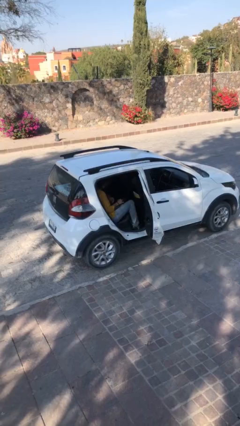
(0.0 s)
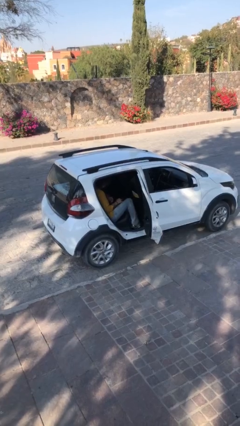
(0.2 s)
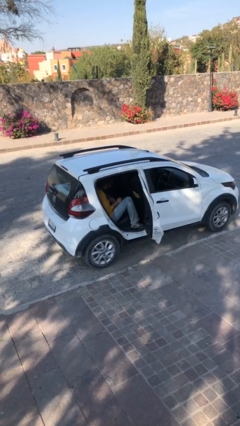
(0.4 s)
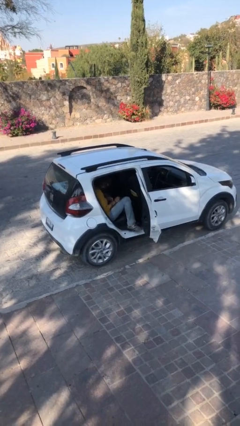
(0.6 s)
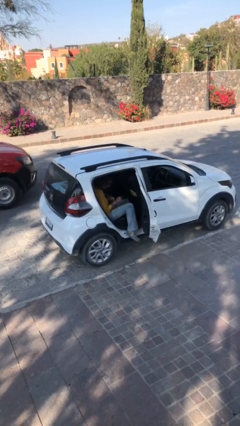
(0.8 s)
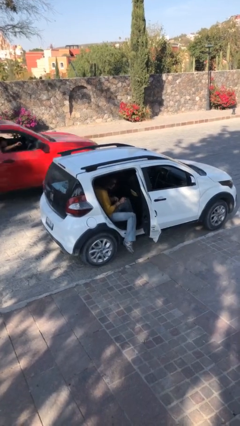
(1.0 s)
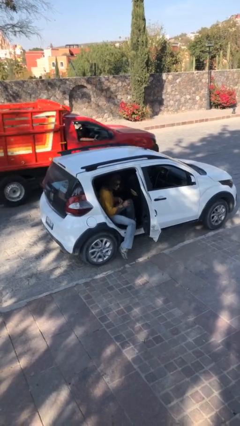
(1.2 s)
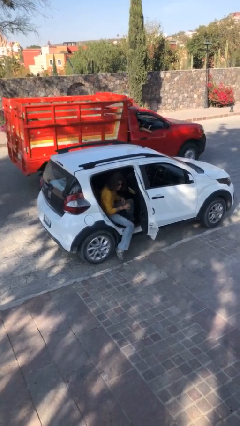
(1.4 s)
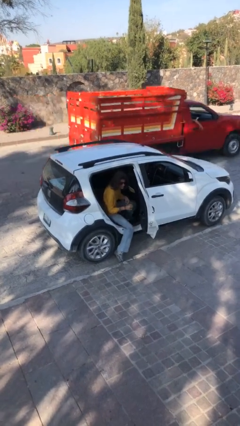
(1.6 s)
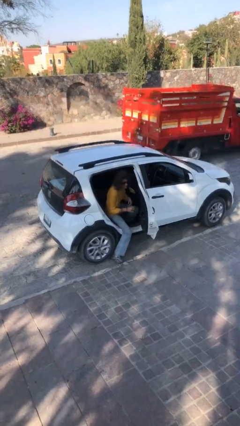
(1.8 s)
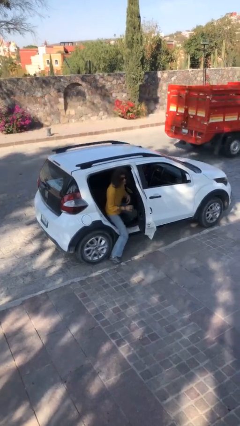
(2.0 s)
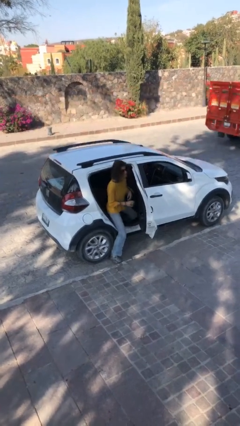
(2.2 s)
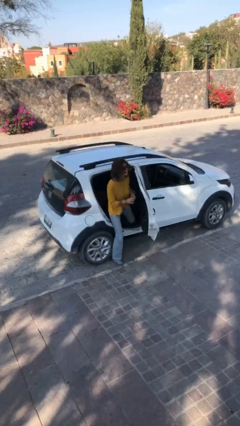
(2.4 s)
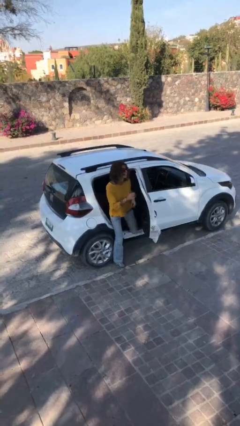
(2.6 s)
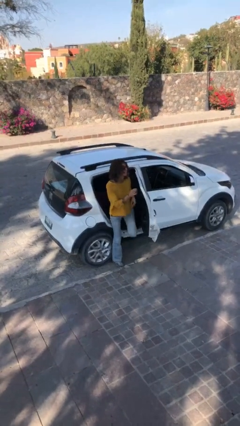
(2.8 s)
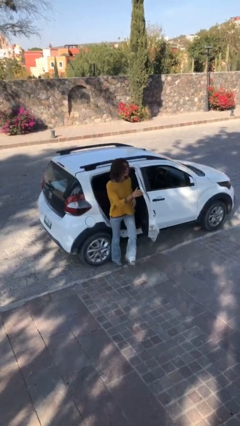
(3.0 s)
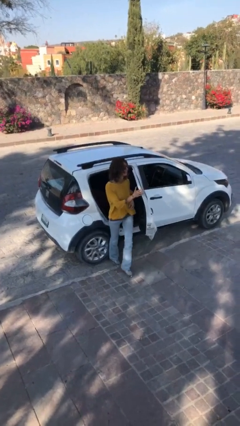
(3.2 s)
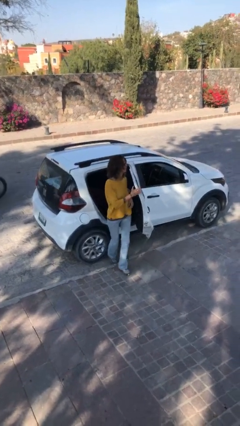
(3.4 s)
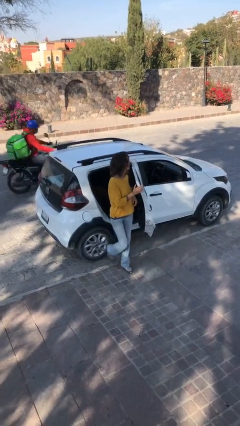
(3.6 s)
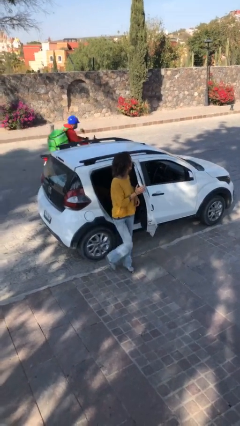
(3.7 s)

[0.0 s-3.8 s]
person exits car

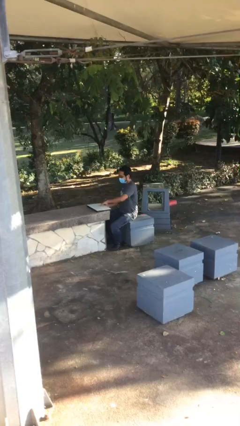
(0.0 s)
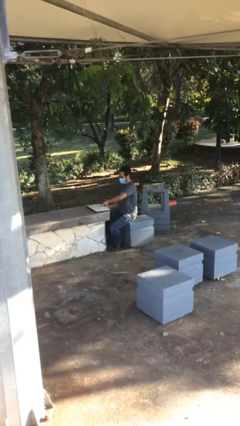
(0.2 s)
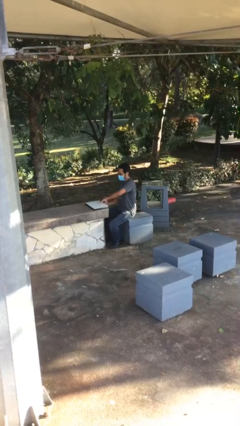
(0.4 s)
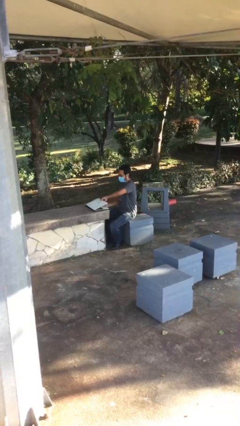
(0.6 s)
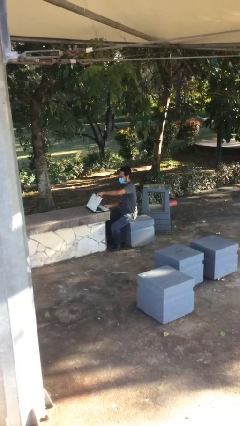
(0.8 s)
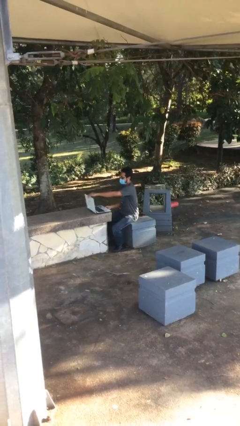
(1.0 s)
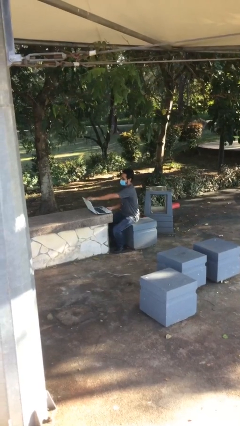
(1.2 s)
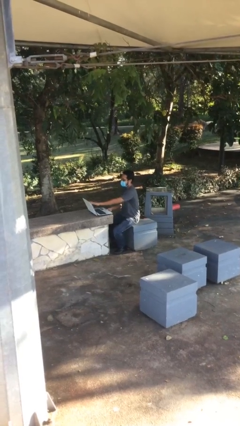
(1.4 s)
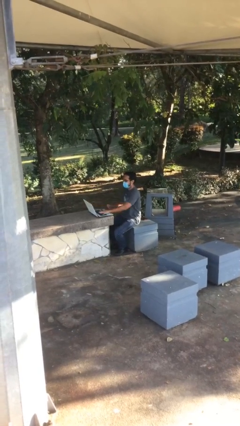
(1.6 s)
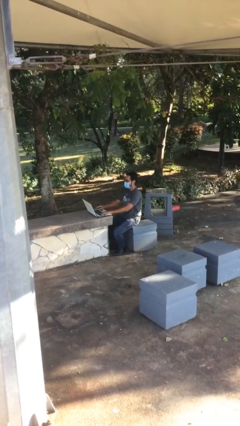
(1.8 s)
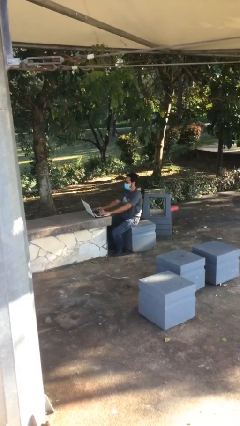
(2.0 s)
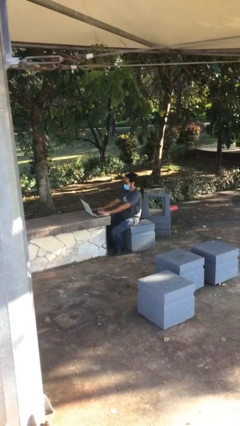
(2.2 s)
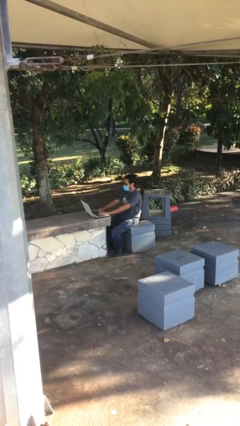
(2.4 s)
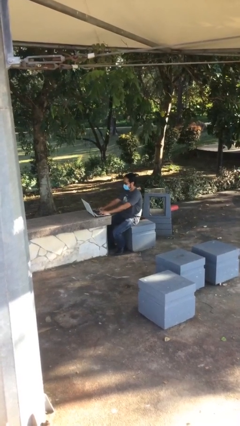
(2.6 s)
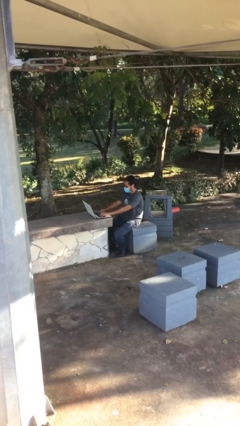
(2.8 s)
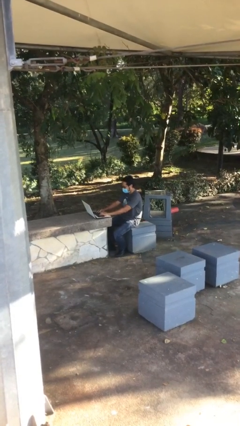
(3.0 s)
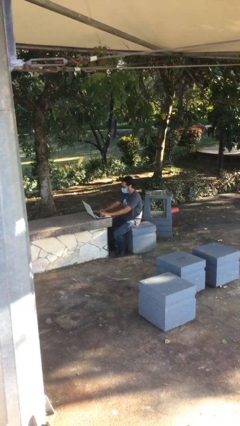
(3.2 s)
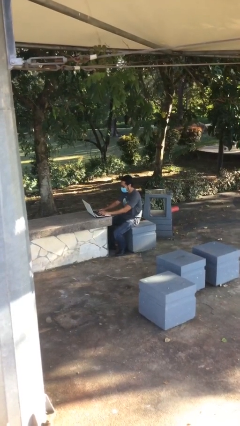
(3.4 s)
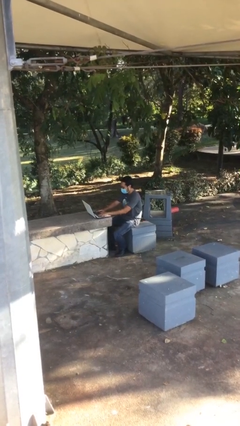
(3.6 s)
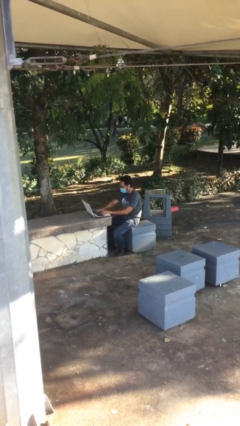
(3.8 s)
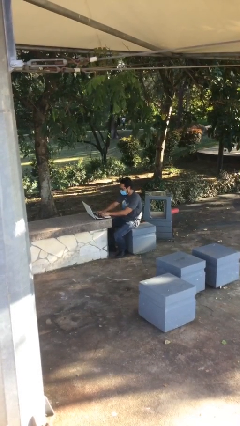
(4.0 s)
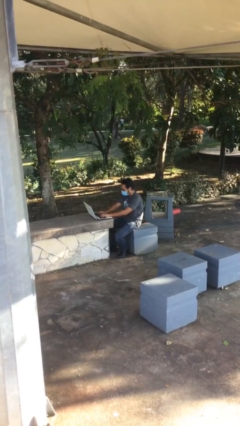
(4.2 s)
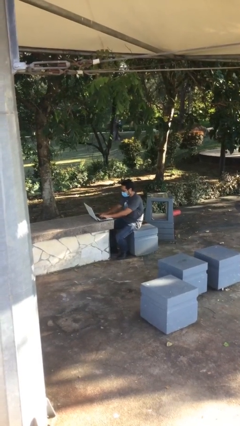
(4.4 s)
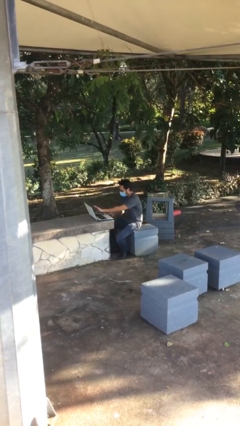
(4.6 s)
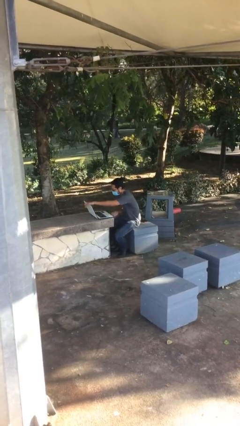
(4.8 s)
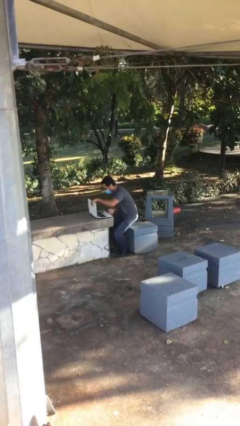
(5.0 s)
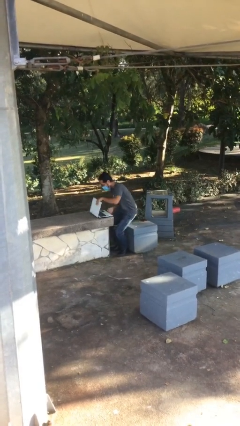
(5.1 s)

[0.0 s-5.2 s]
person interacts with laptop

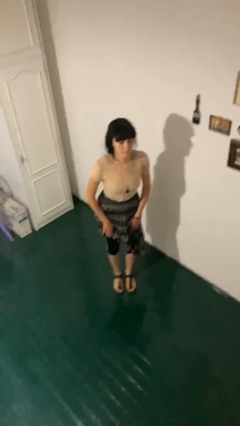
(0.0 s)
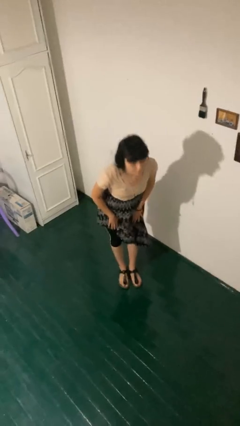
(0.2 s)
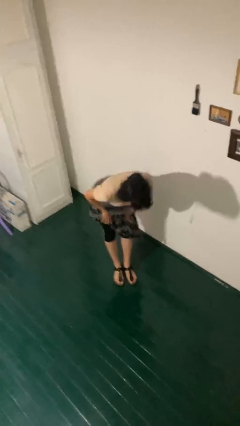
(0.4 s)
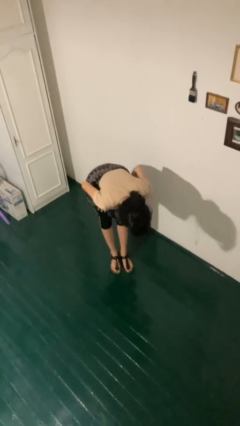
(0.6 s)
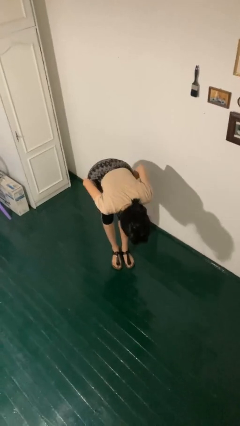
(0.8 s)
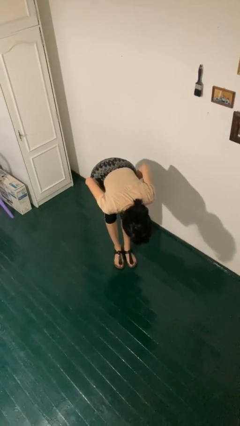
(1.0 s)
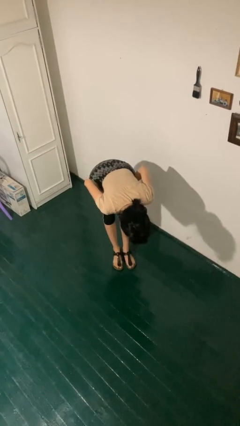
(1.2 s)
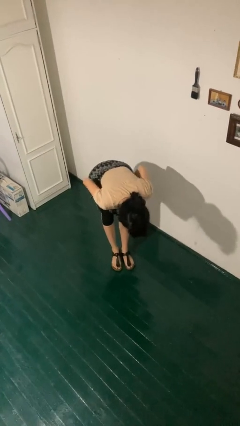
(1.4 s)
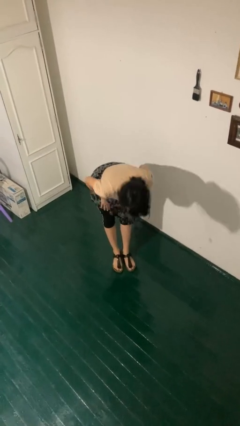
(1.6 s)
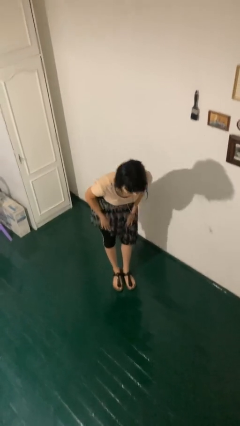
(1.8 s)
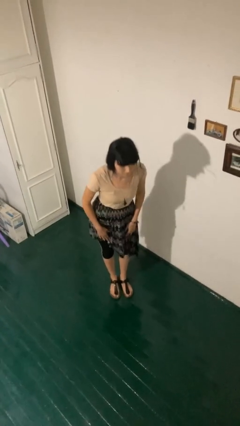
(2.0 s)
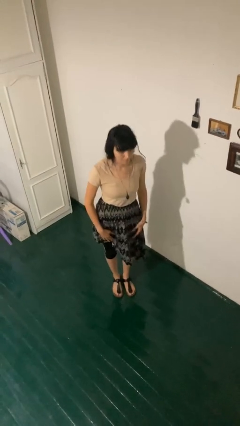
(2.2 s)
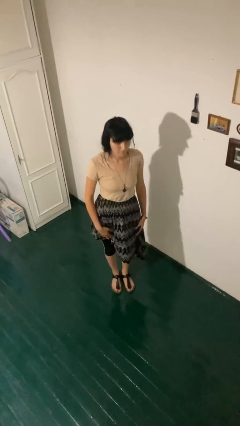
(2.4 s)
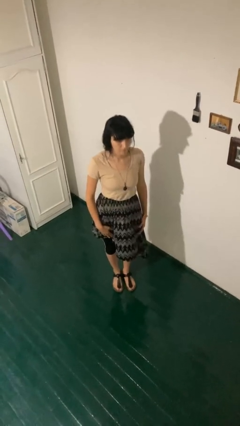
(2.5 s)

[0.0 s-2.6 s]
person bows

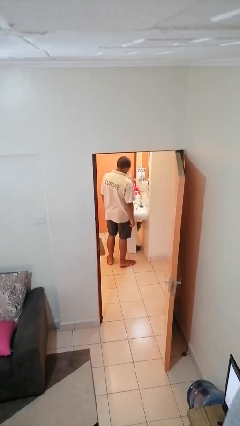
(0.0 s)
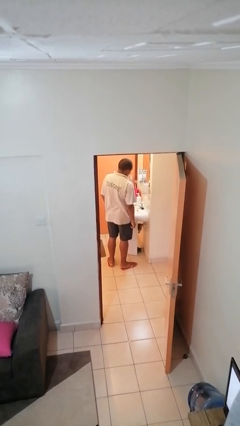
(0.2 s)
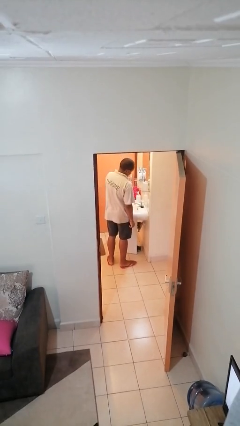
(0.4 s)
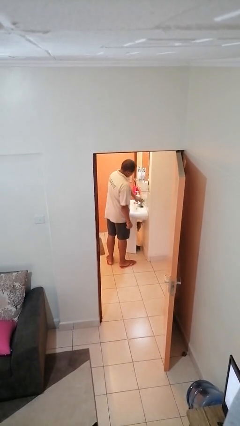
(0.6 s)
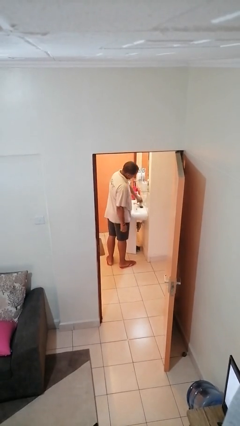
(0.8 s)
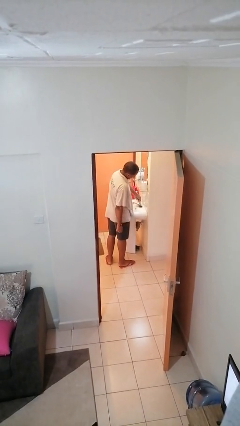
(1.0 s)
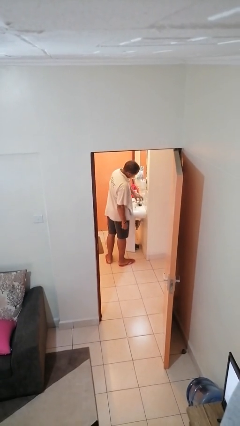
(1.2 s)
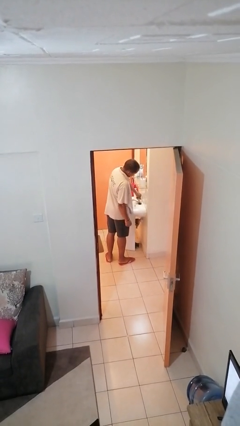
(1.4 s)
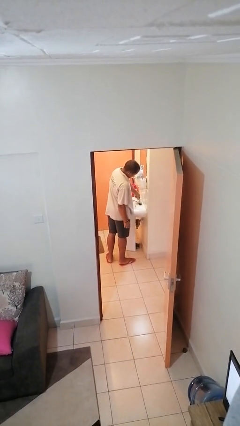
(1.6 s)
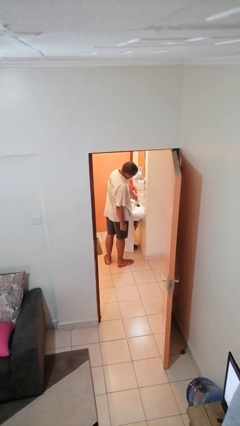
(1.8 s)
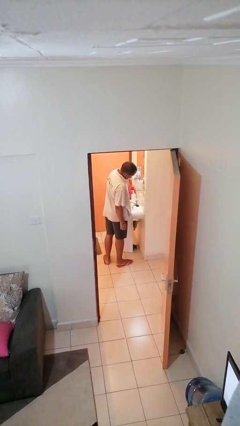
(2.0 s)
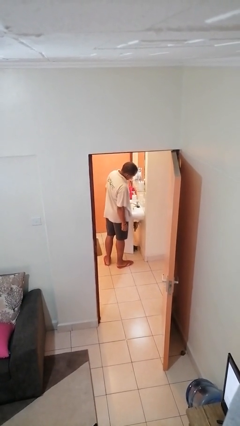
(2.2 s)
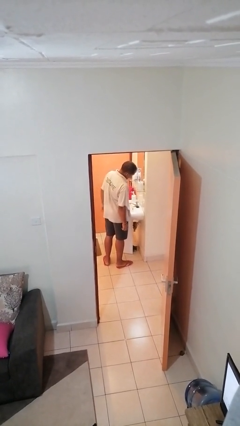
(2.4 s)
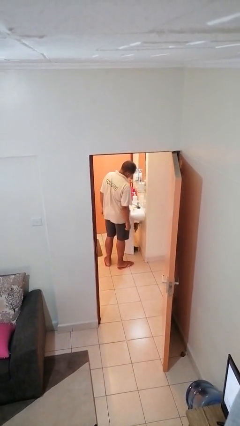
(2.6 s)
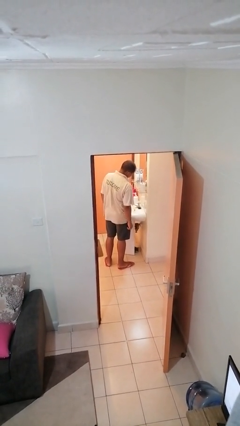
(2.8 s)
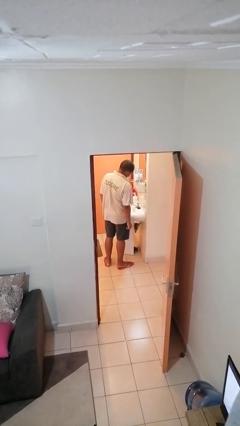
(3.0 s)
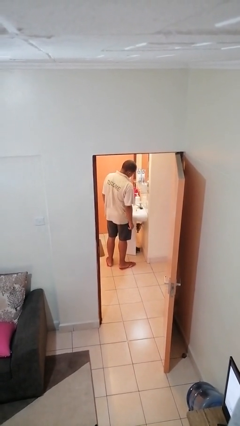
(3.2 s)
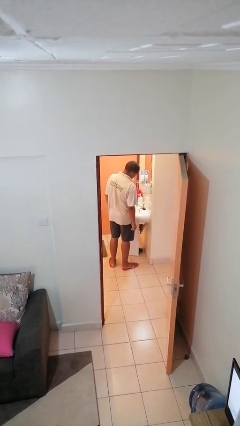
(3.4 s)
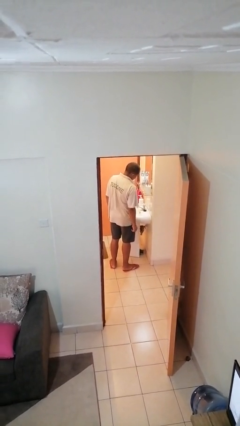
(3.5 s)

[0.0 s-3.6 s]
person turns on faucet

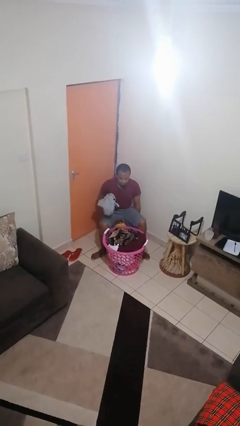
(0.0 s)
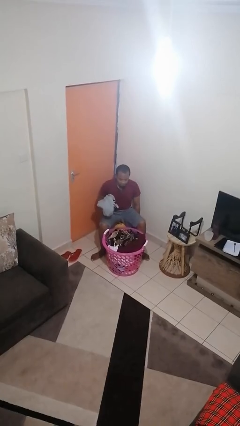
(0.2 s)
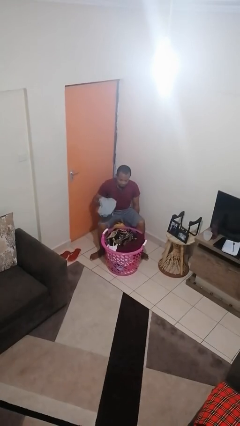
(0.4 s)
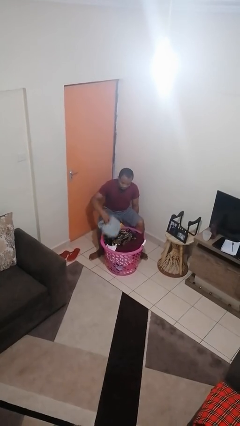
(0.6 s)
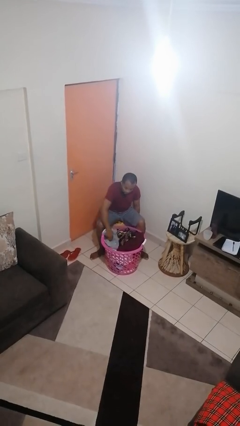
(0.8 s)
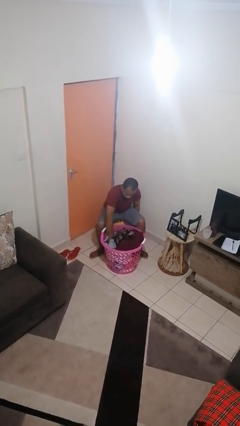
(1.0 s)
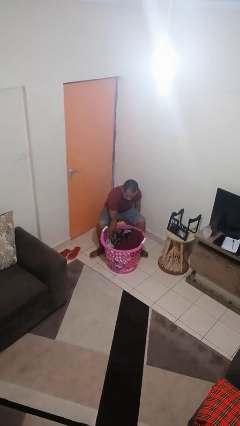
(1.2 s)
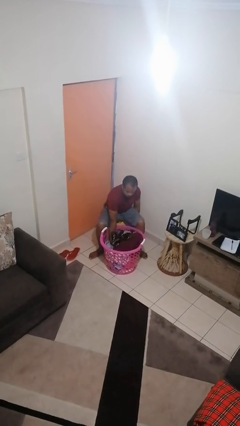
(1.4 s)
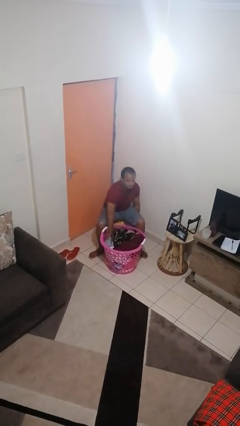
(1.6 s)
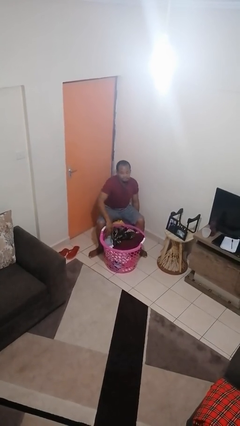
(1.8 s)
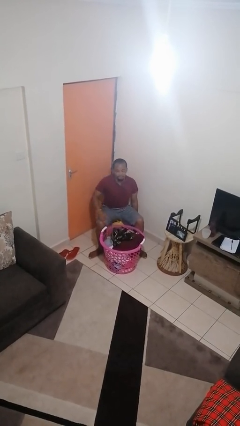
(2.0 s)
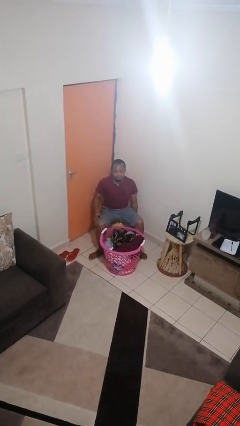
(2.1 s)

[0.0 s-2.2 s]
person puts object into basket

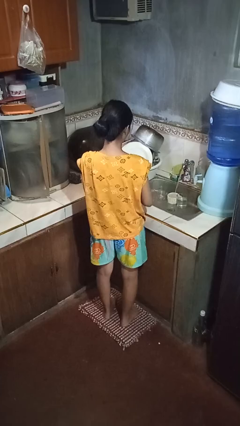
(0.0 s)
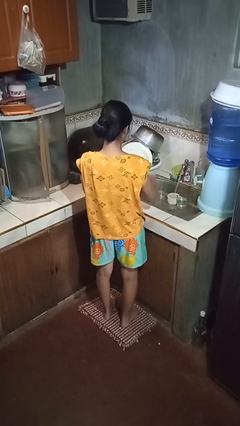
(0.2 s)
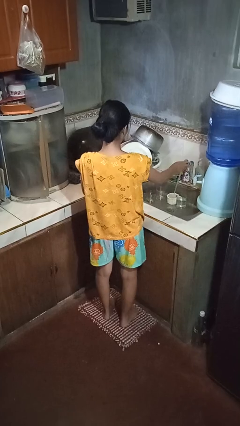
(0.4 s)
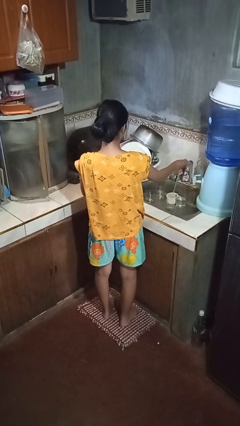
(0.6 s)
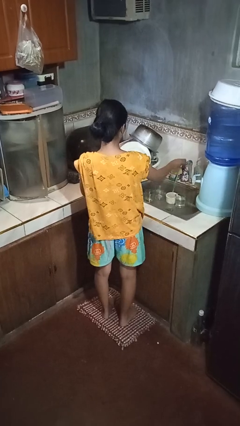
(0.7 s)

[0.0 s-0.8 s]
person turns off faucet
